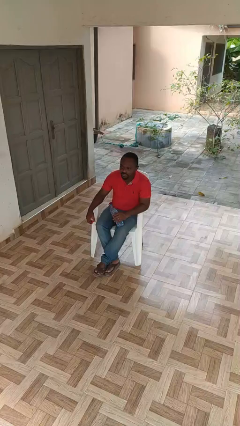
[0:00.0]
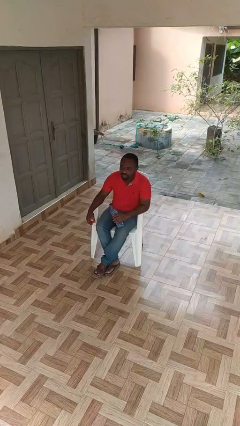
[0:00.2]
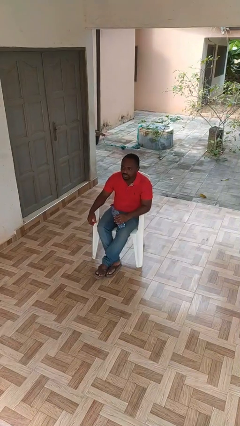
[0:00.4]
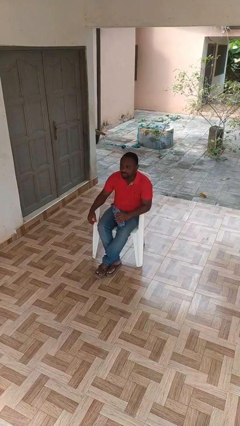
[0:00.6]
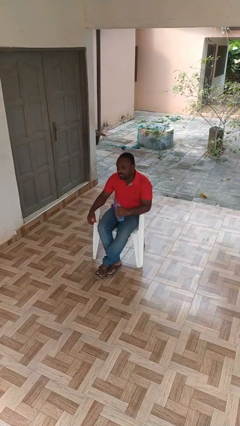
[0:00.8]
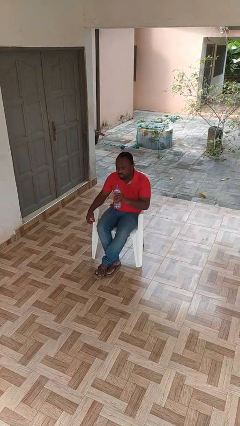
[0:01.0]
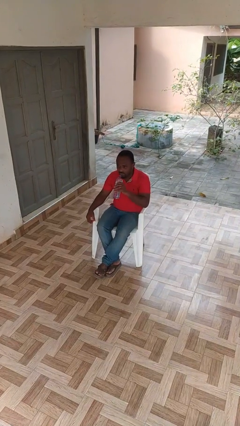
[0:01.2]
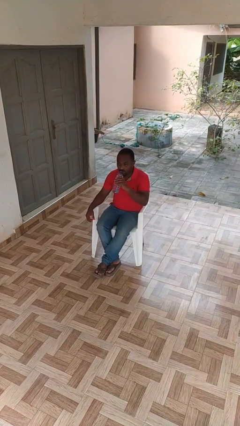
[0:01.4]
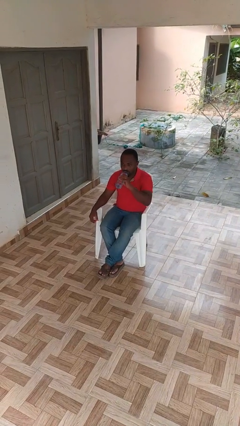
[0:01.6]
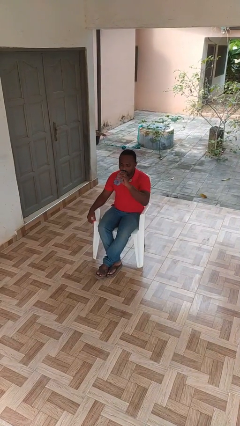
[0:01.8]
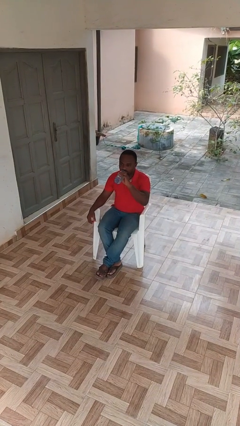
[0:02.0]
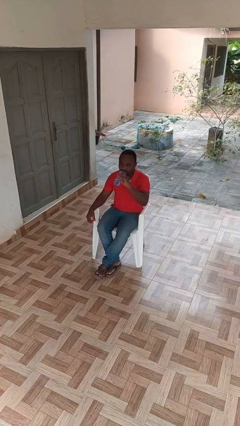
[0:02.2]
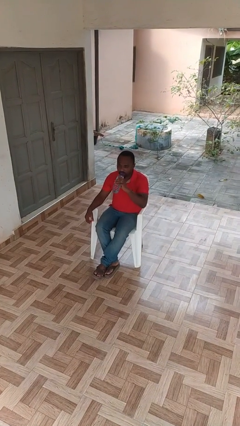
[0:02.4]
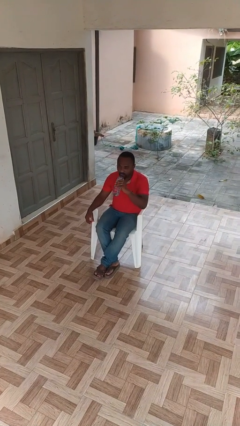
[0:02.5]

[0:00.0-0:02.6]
person drinks from bottle

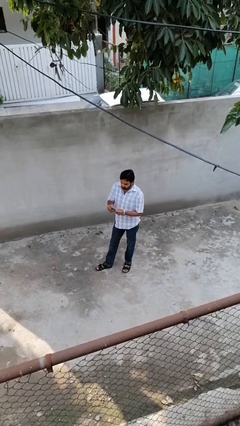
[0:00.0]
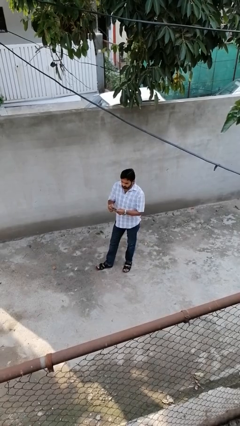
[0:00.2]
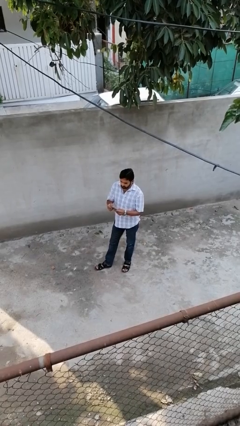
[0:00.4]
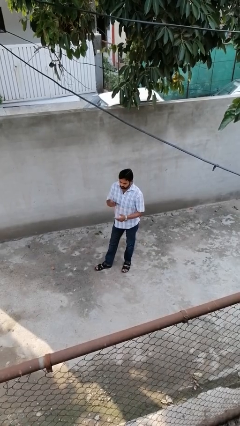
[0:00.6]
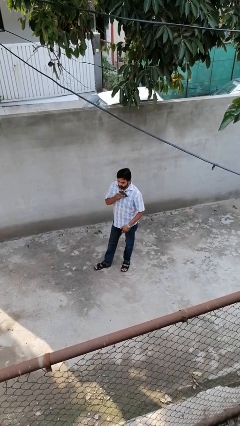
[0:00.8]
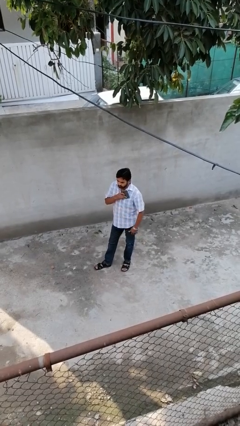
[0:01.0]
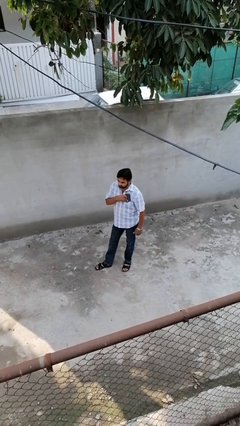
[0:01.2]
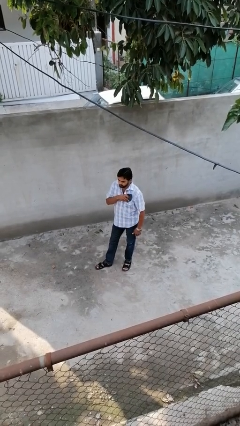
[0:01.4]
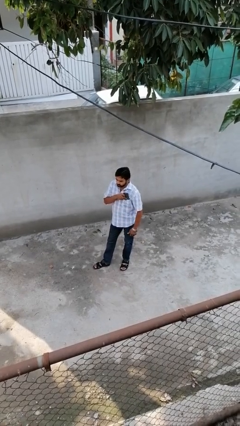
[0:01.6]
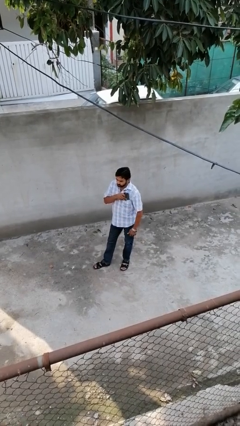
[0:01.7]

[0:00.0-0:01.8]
person puts phone into pocket

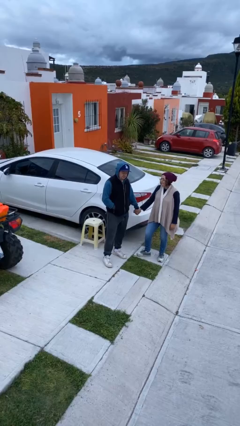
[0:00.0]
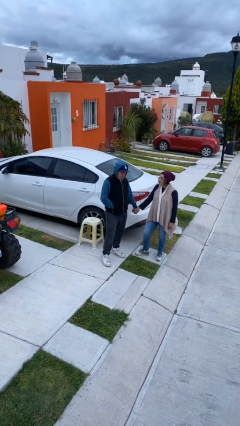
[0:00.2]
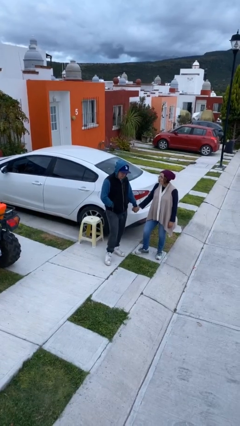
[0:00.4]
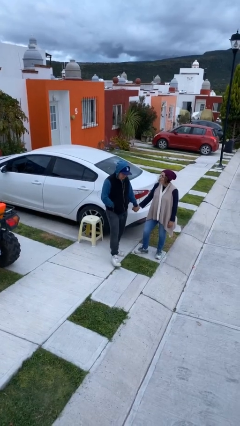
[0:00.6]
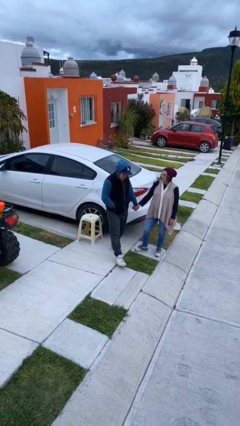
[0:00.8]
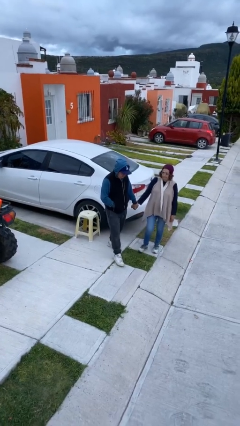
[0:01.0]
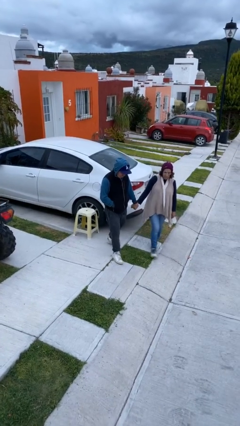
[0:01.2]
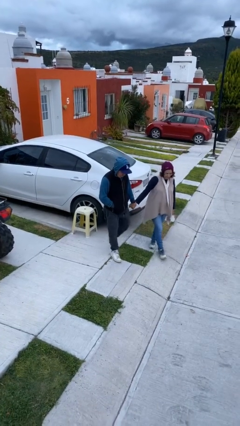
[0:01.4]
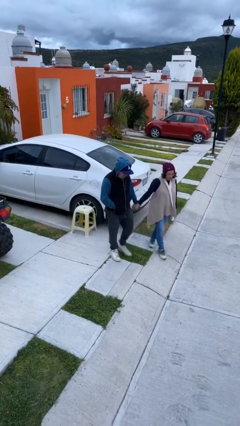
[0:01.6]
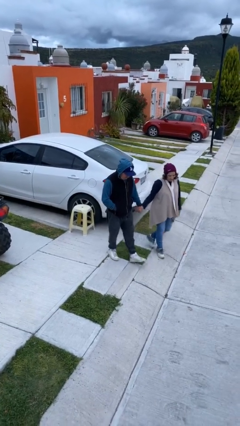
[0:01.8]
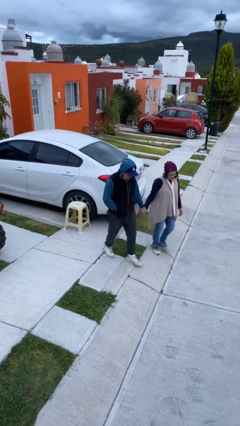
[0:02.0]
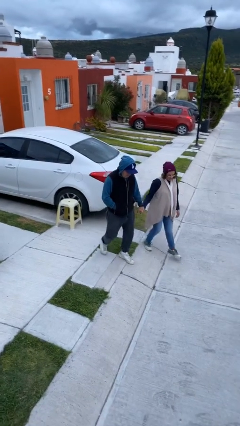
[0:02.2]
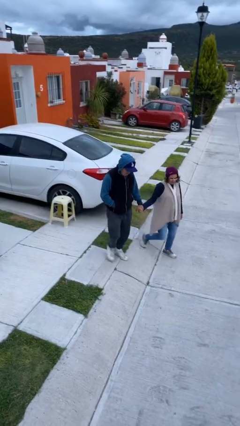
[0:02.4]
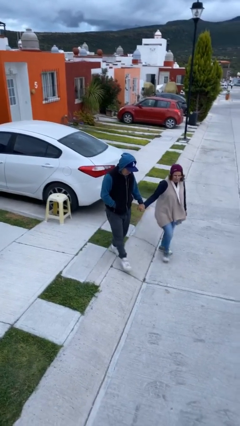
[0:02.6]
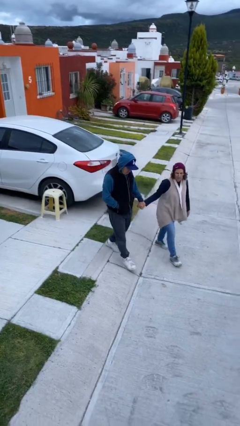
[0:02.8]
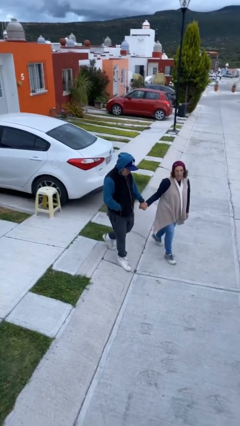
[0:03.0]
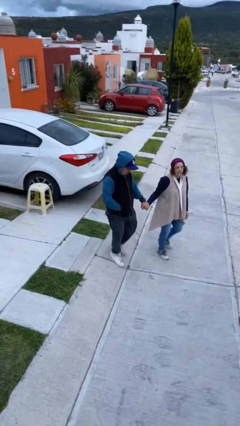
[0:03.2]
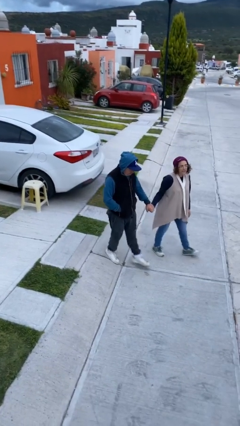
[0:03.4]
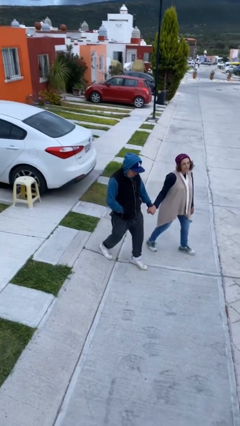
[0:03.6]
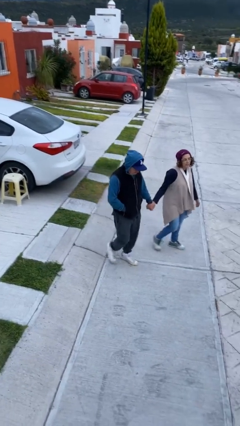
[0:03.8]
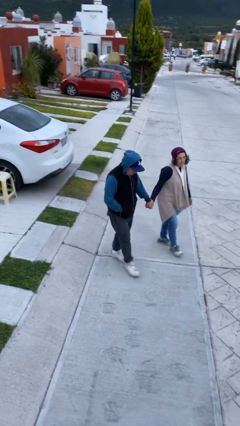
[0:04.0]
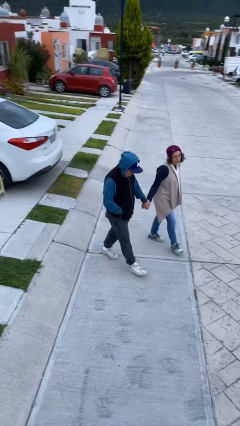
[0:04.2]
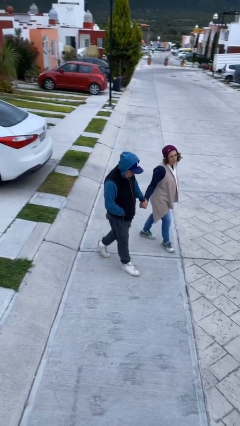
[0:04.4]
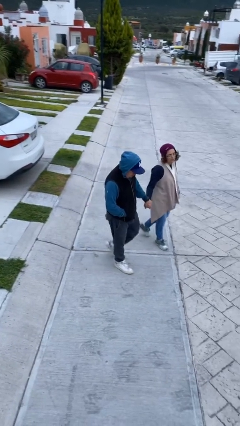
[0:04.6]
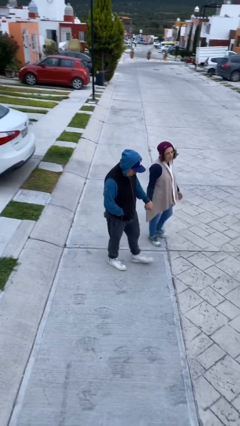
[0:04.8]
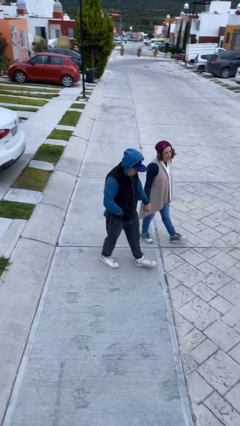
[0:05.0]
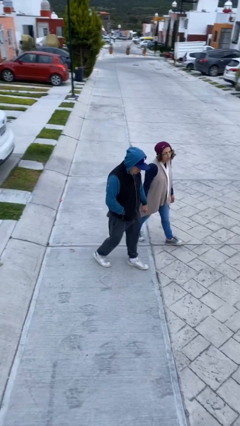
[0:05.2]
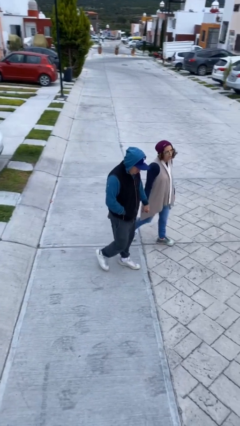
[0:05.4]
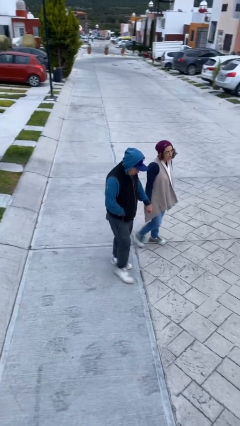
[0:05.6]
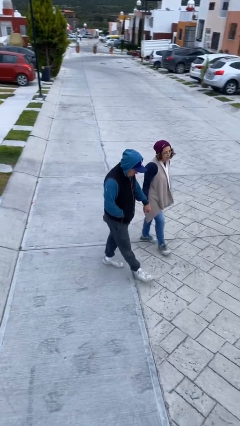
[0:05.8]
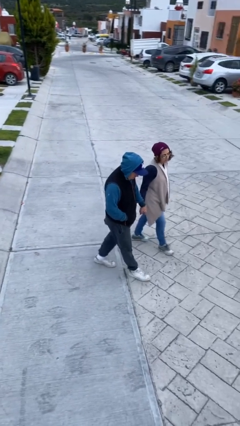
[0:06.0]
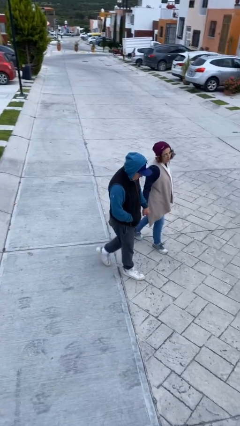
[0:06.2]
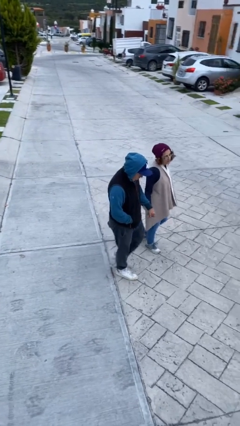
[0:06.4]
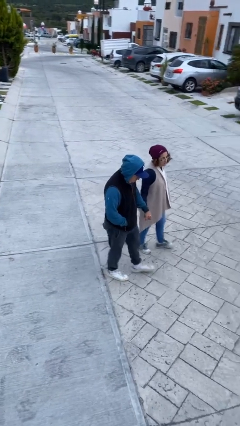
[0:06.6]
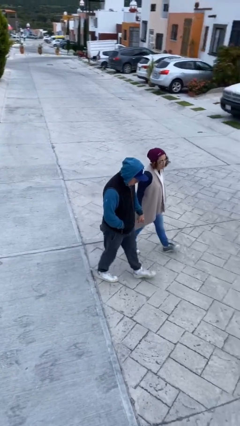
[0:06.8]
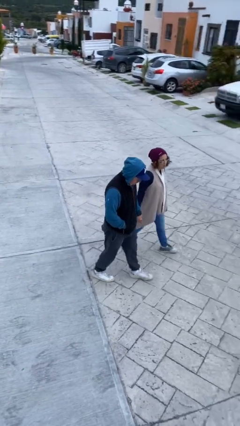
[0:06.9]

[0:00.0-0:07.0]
person holds hand

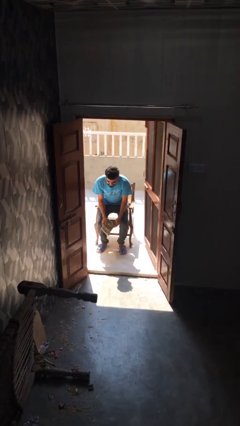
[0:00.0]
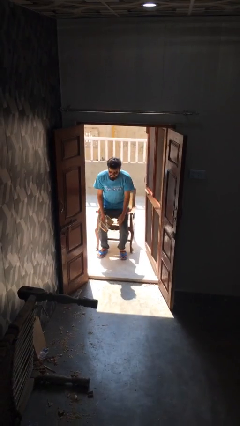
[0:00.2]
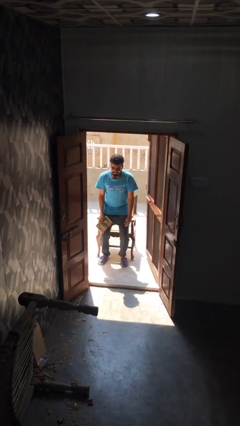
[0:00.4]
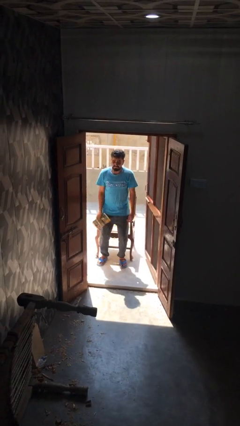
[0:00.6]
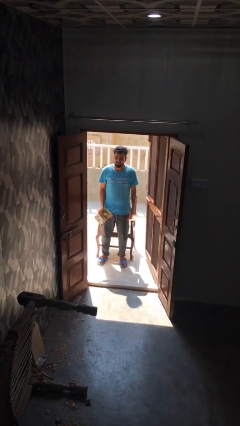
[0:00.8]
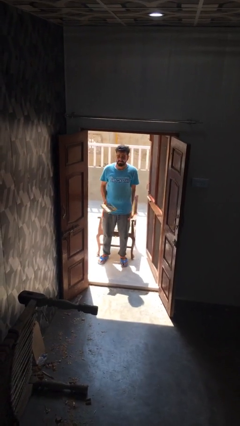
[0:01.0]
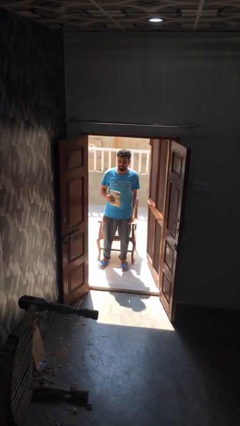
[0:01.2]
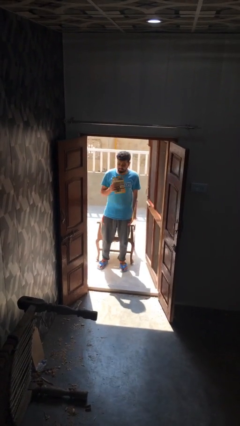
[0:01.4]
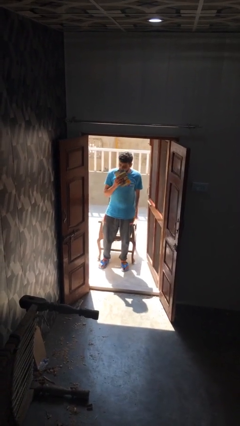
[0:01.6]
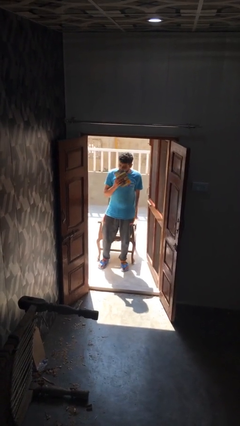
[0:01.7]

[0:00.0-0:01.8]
person stands up

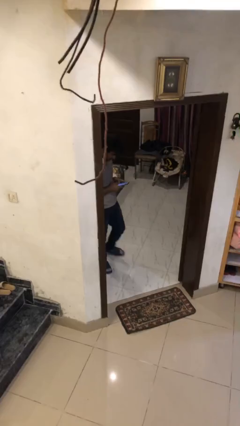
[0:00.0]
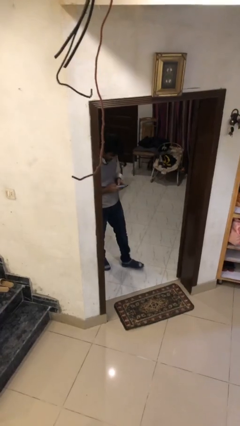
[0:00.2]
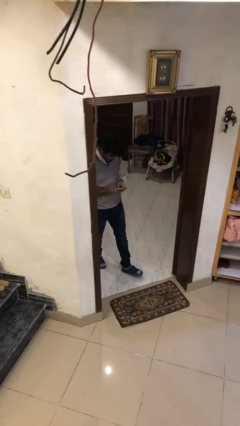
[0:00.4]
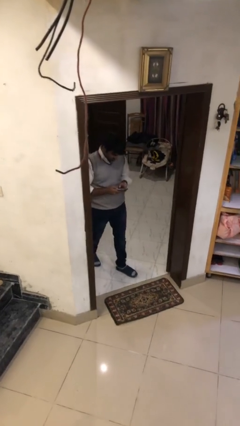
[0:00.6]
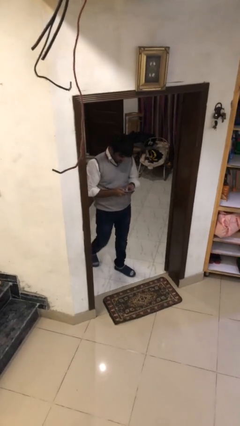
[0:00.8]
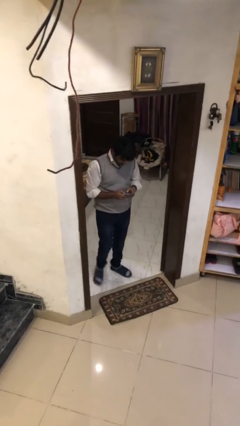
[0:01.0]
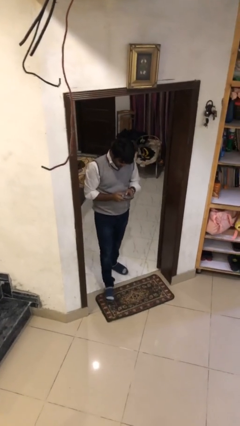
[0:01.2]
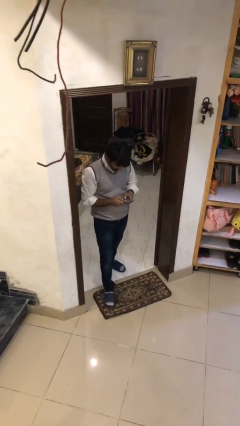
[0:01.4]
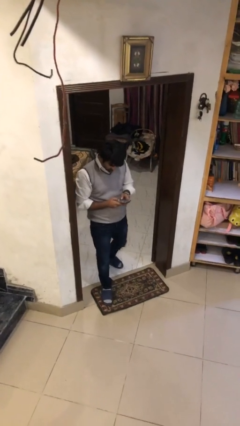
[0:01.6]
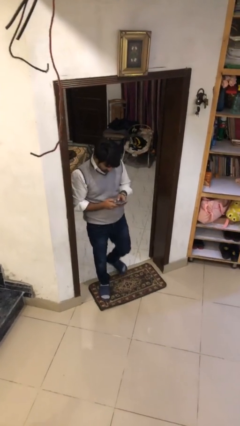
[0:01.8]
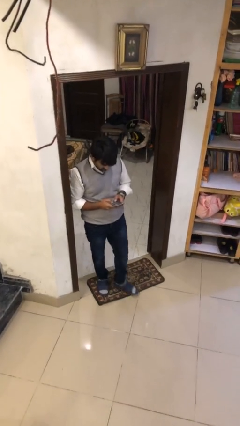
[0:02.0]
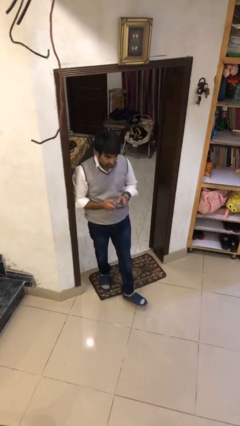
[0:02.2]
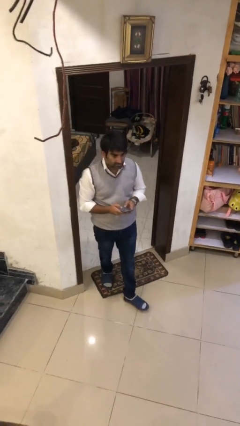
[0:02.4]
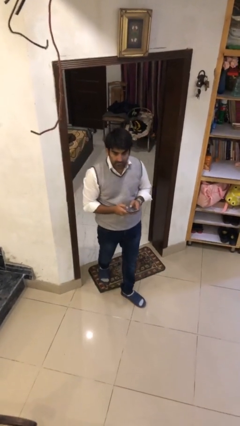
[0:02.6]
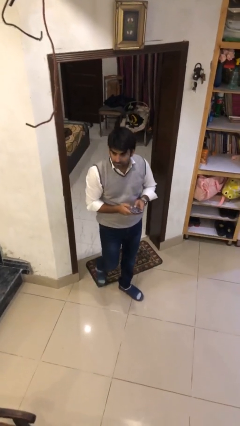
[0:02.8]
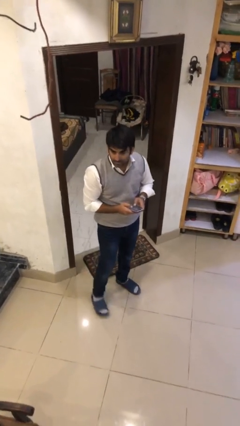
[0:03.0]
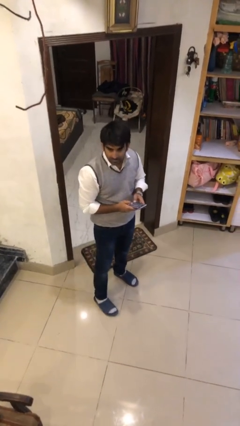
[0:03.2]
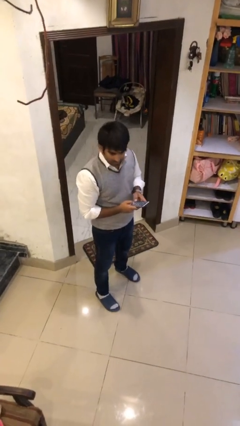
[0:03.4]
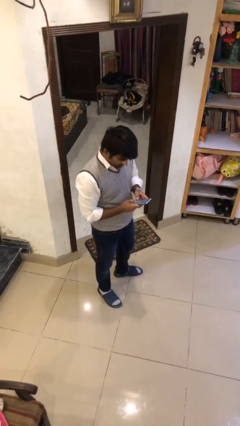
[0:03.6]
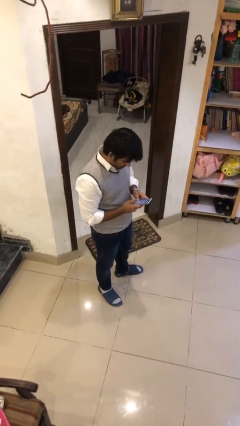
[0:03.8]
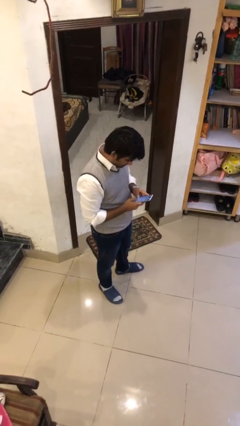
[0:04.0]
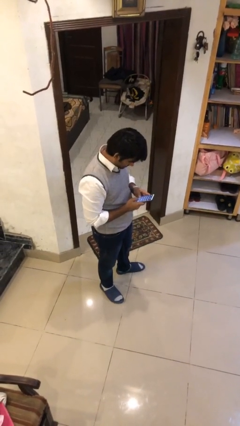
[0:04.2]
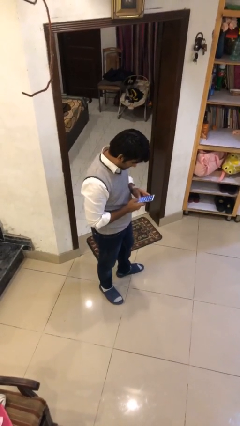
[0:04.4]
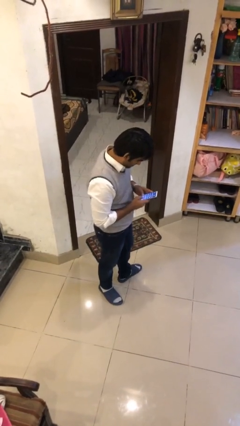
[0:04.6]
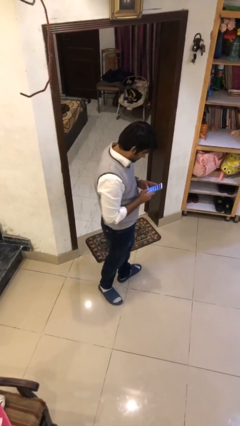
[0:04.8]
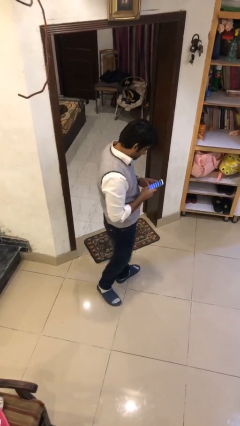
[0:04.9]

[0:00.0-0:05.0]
person enters scene through structure
